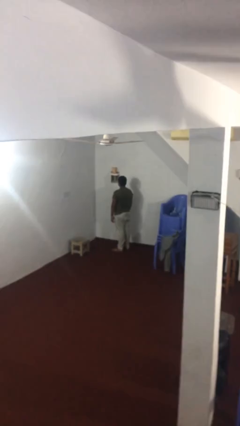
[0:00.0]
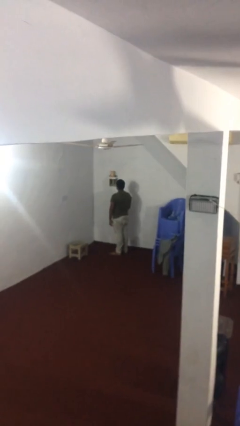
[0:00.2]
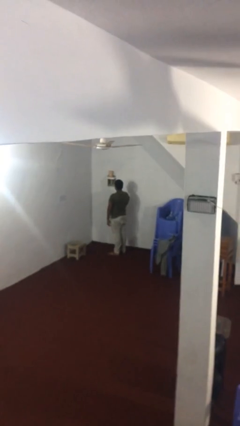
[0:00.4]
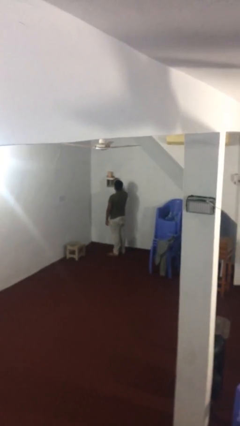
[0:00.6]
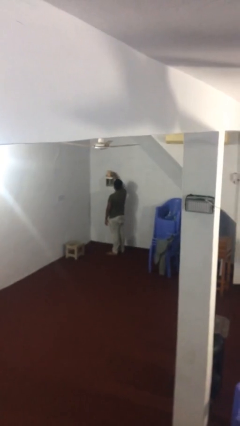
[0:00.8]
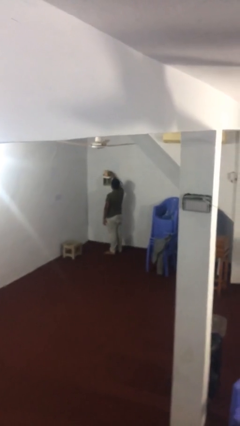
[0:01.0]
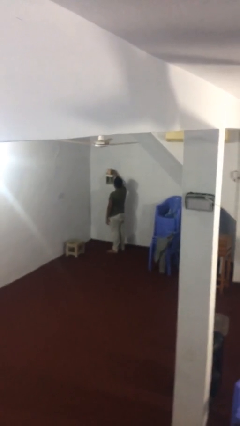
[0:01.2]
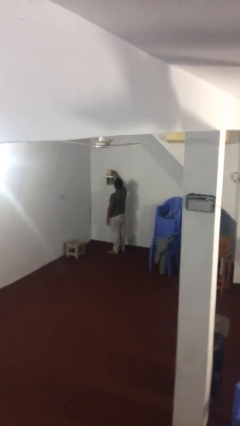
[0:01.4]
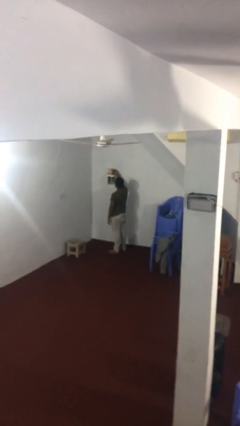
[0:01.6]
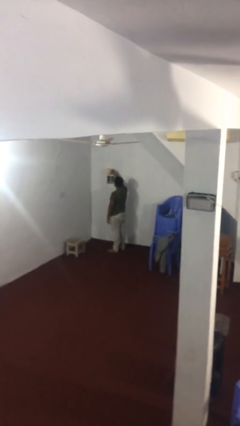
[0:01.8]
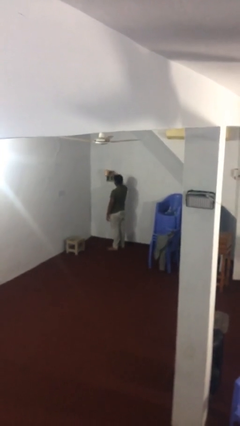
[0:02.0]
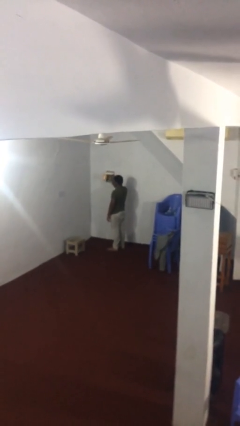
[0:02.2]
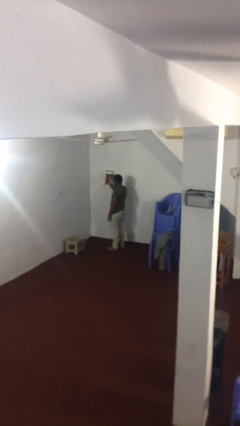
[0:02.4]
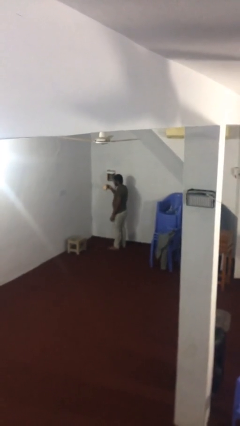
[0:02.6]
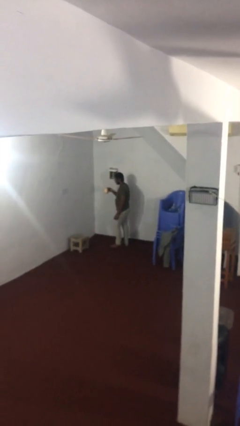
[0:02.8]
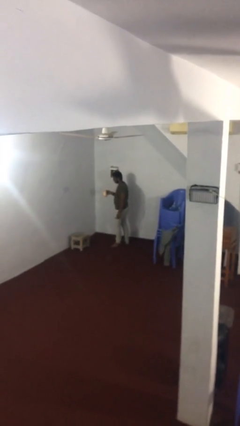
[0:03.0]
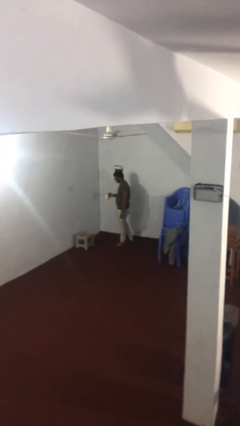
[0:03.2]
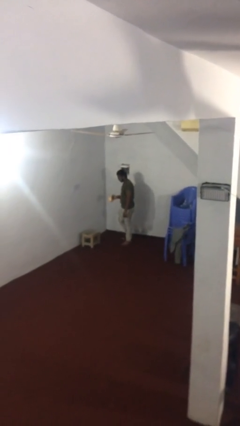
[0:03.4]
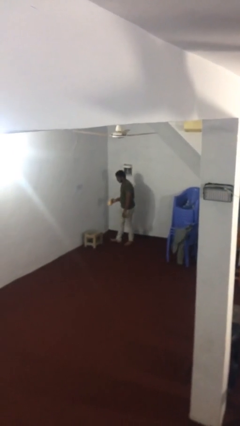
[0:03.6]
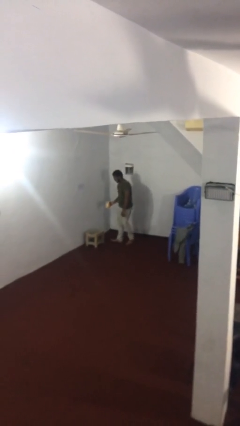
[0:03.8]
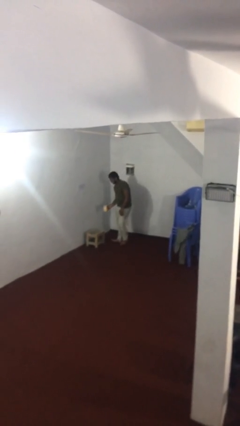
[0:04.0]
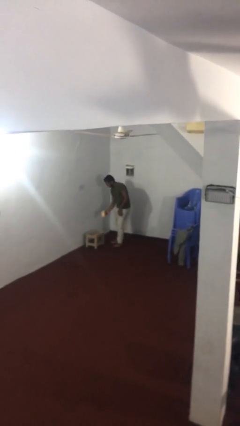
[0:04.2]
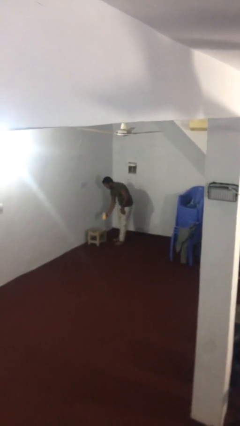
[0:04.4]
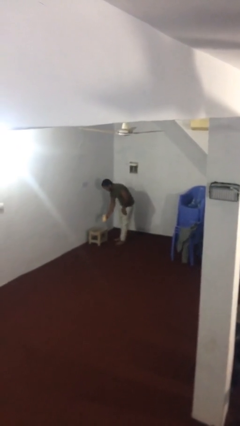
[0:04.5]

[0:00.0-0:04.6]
person picks up object from shelf

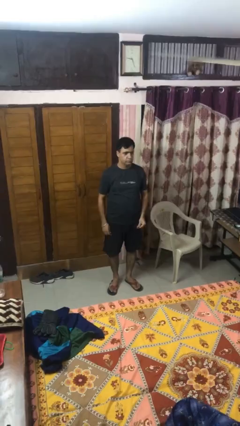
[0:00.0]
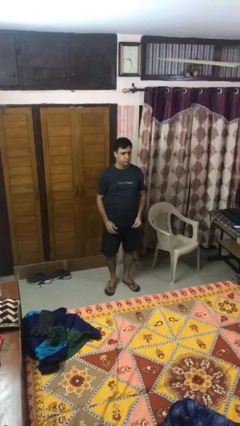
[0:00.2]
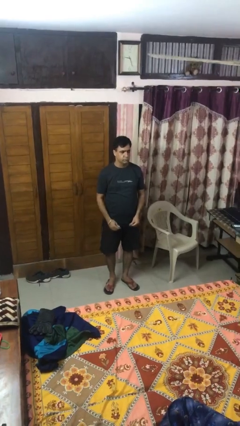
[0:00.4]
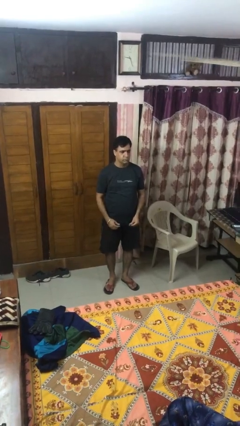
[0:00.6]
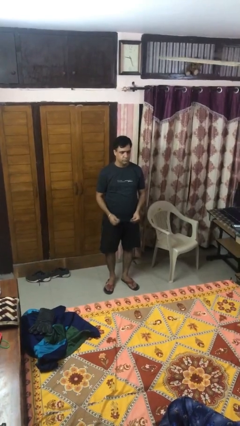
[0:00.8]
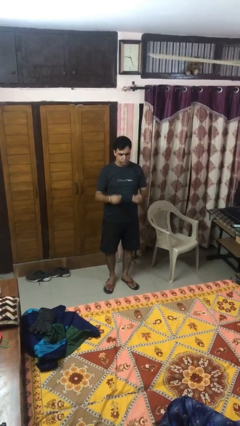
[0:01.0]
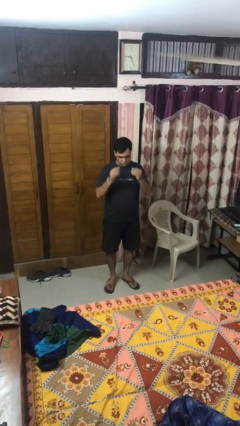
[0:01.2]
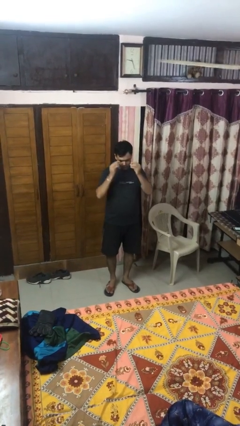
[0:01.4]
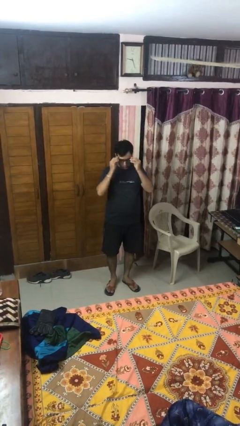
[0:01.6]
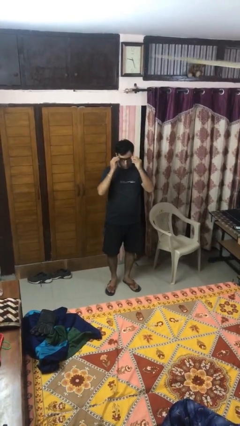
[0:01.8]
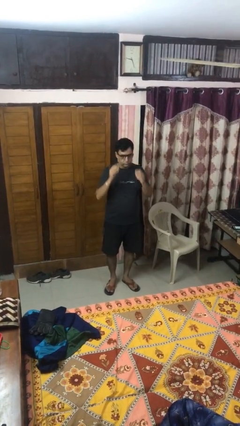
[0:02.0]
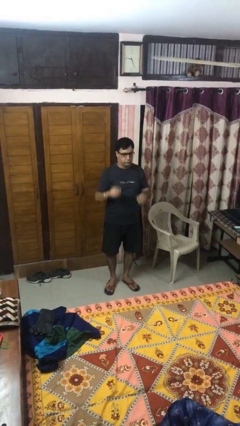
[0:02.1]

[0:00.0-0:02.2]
person puts on glasses

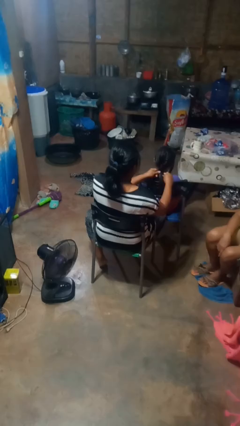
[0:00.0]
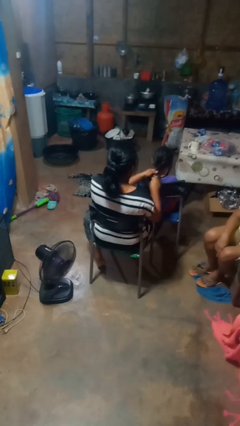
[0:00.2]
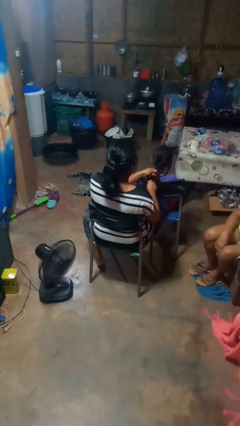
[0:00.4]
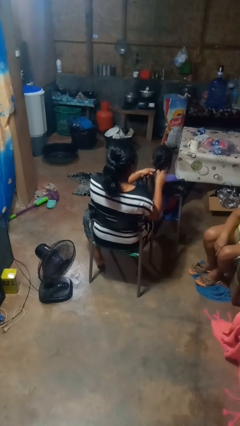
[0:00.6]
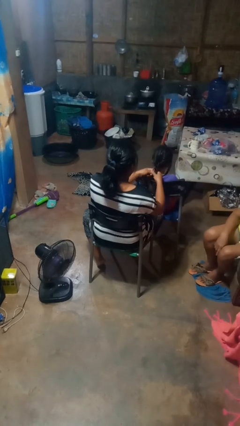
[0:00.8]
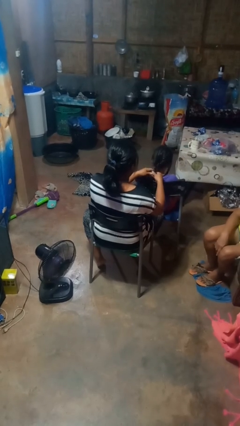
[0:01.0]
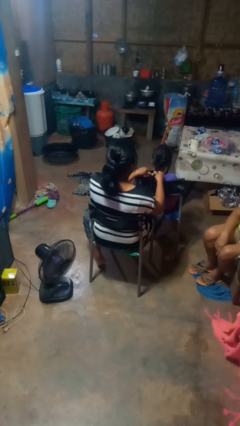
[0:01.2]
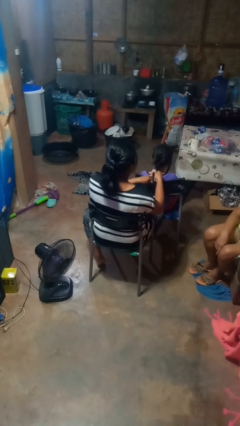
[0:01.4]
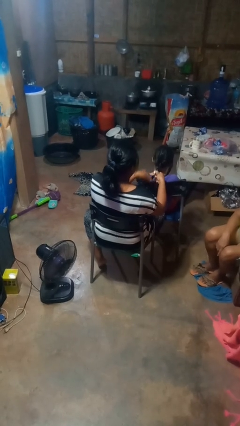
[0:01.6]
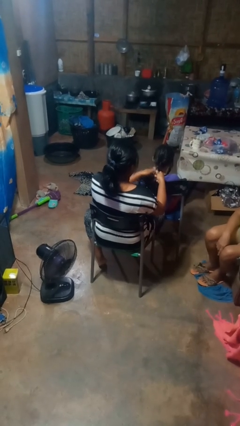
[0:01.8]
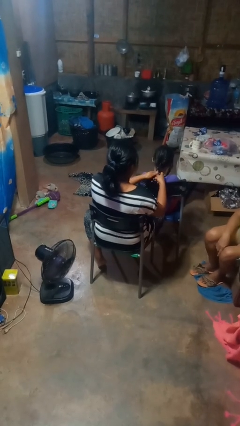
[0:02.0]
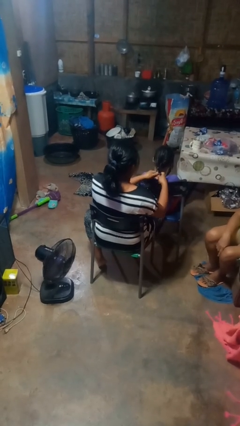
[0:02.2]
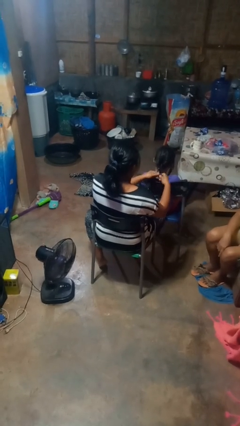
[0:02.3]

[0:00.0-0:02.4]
person braids hair of person

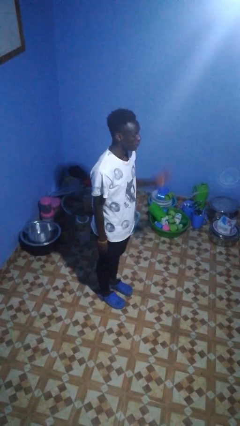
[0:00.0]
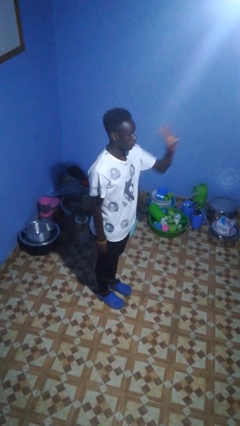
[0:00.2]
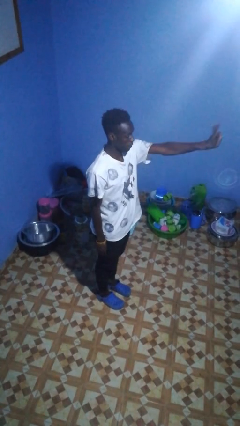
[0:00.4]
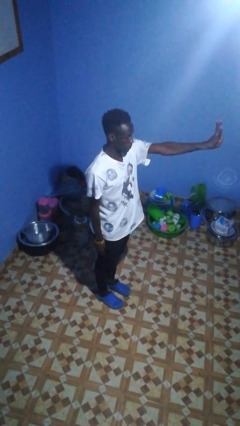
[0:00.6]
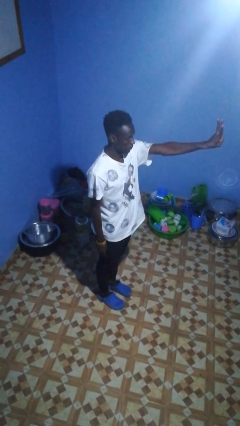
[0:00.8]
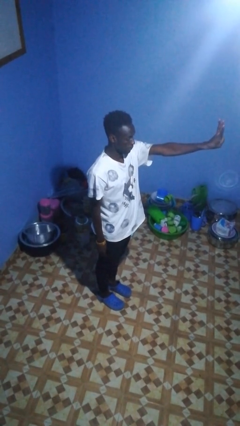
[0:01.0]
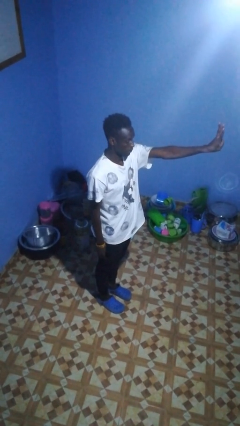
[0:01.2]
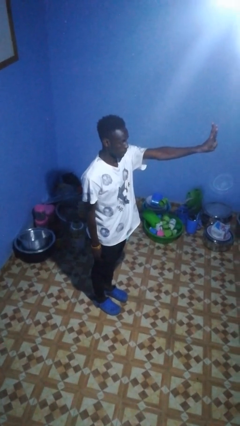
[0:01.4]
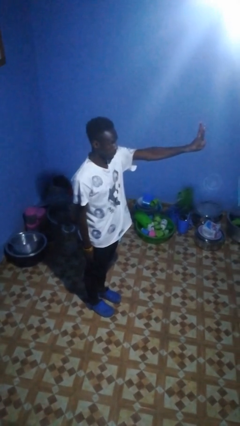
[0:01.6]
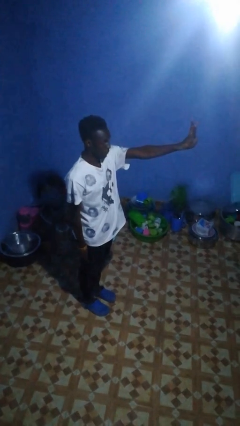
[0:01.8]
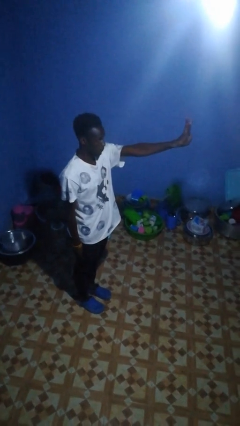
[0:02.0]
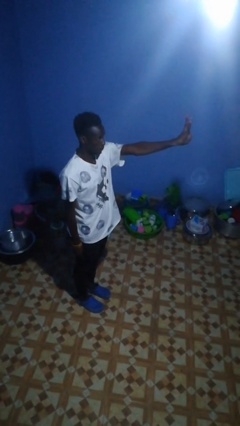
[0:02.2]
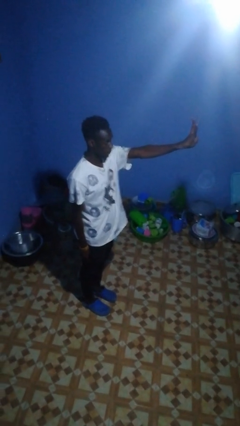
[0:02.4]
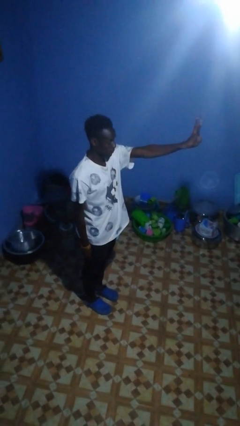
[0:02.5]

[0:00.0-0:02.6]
person gestures number three

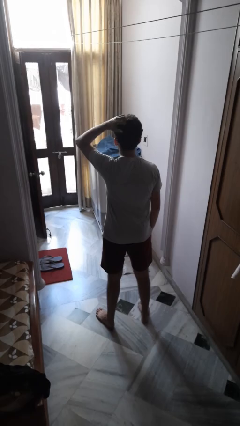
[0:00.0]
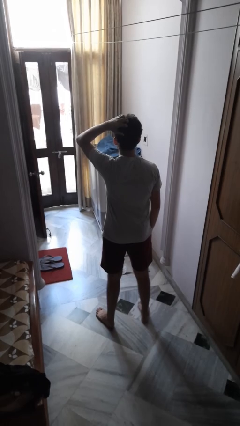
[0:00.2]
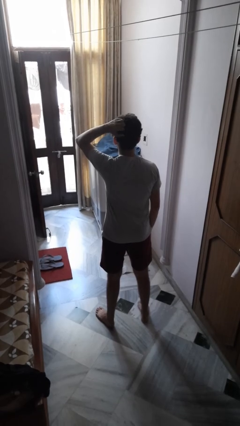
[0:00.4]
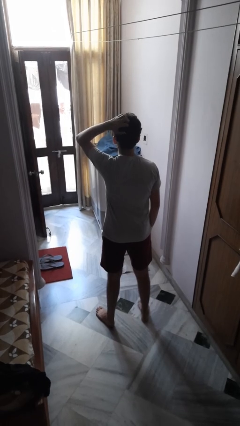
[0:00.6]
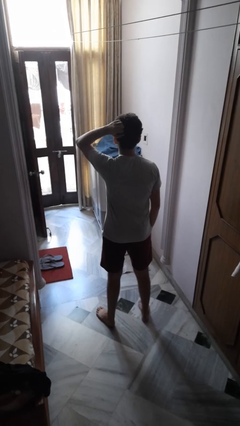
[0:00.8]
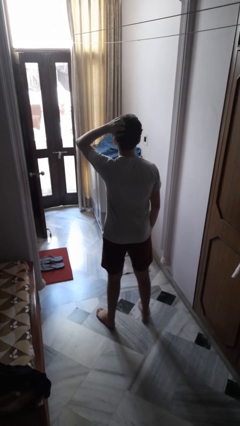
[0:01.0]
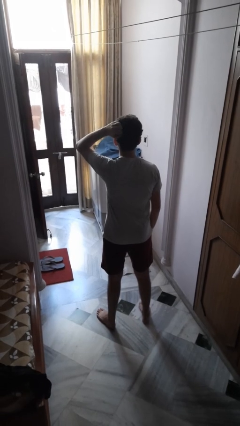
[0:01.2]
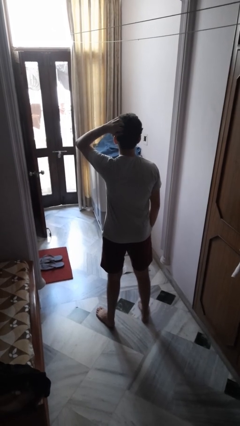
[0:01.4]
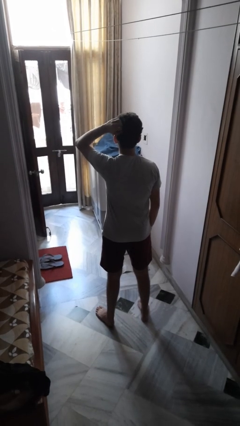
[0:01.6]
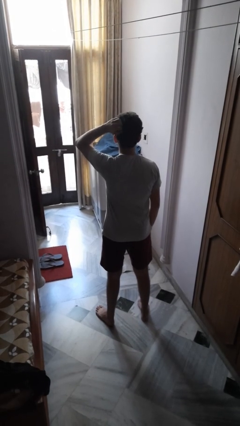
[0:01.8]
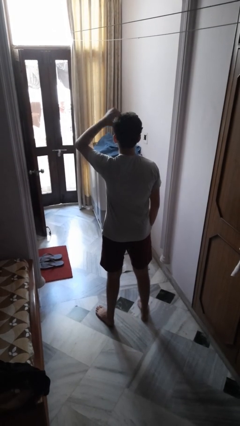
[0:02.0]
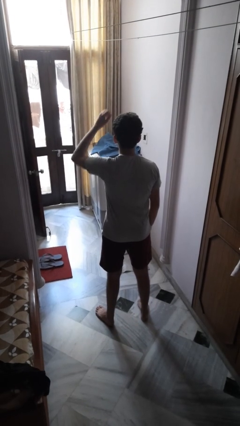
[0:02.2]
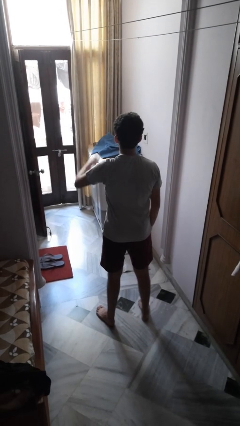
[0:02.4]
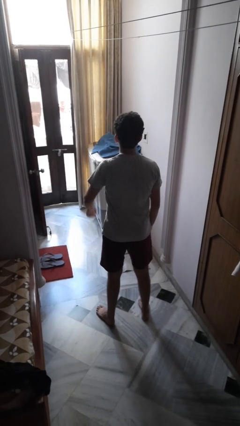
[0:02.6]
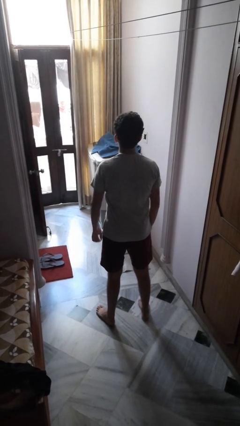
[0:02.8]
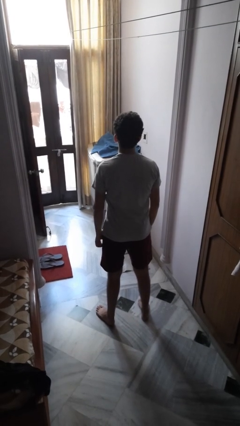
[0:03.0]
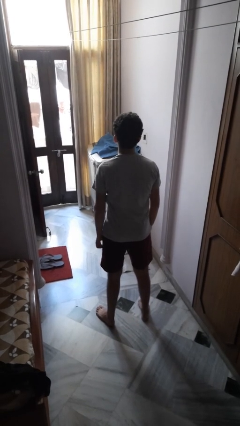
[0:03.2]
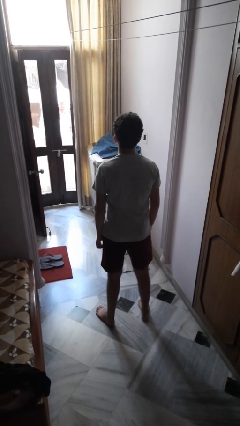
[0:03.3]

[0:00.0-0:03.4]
person scratches face

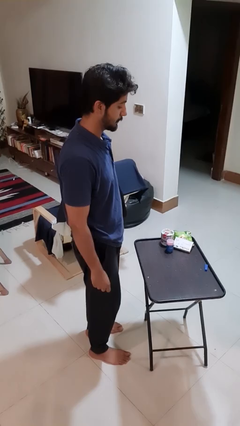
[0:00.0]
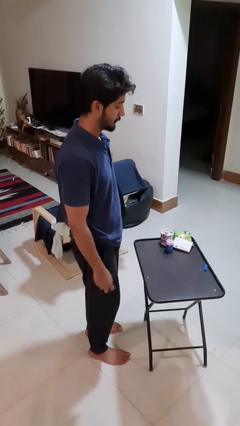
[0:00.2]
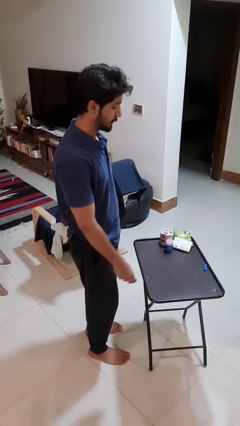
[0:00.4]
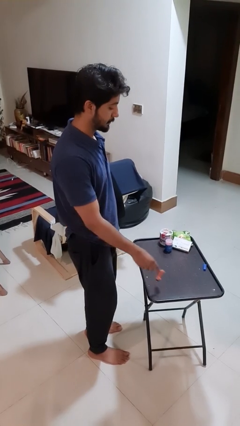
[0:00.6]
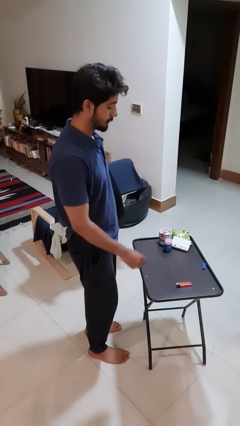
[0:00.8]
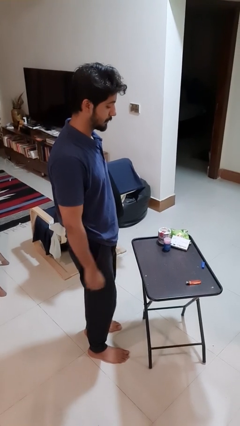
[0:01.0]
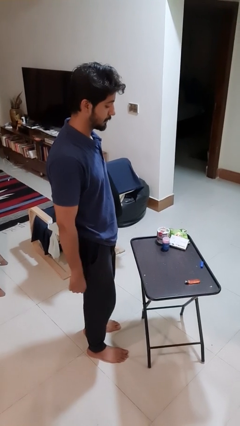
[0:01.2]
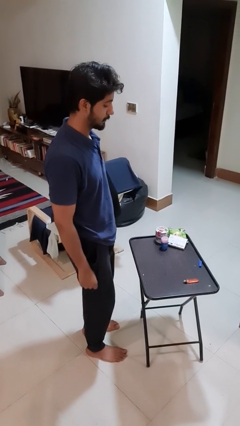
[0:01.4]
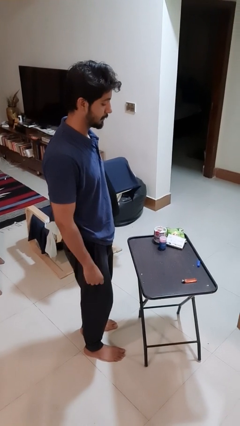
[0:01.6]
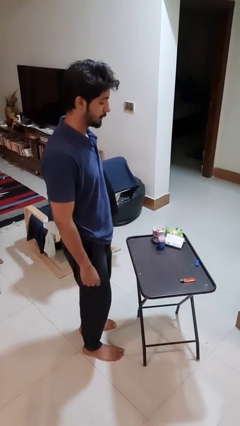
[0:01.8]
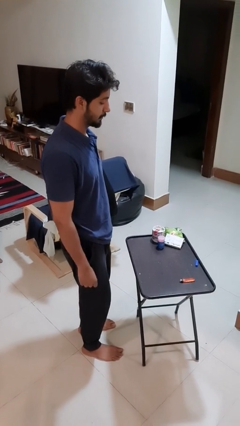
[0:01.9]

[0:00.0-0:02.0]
person throws object on table
